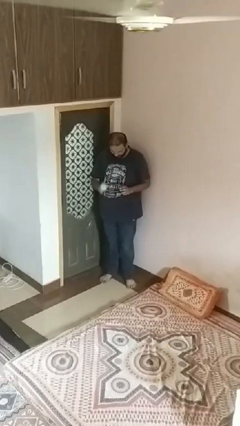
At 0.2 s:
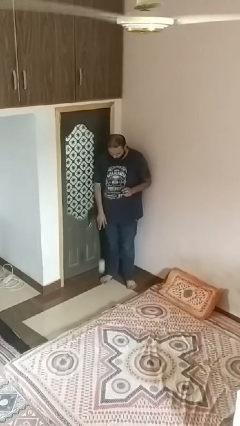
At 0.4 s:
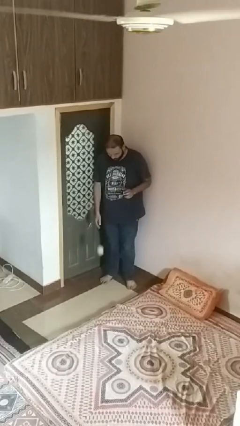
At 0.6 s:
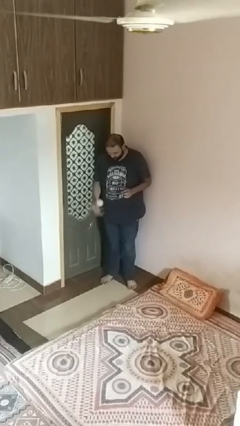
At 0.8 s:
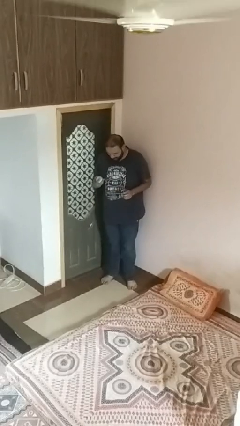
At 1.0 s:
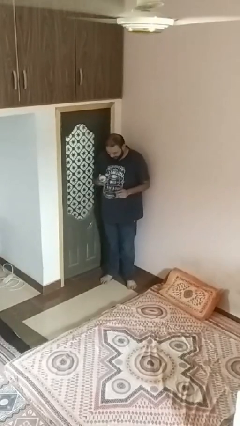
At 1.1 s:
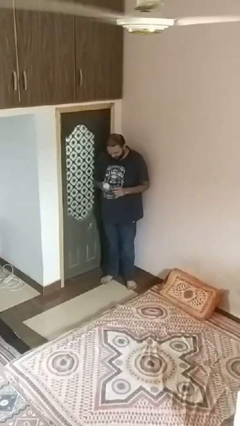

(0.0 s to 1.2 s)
person bounces ball on floor

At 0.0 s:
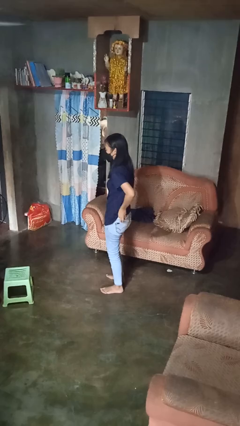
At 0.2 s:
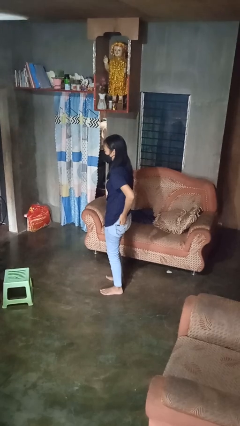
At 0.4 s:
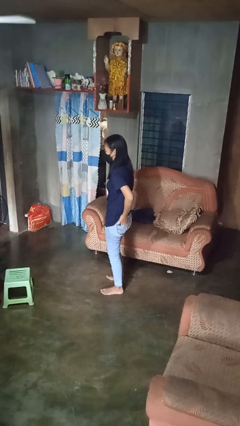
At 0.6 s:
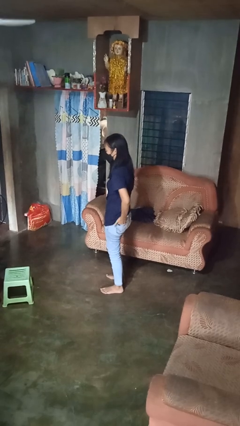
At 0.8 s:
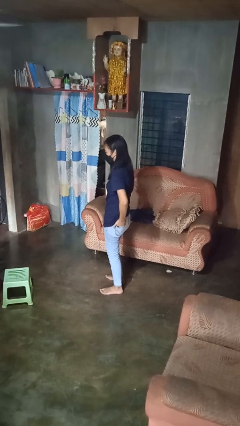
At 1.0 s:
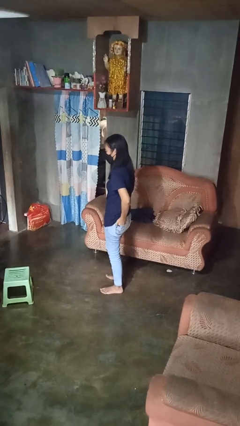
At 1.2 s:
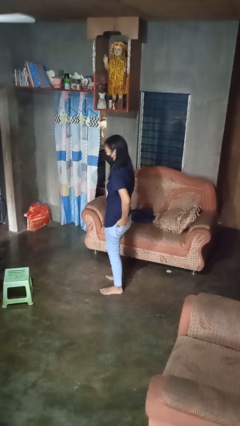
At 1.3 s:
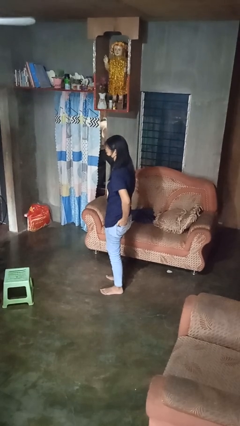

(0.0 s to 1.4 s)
person puts hands in back pockets

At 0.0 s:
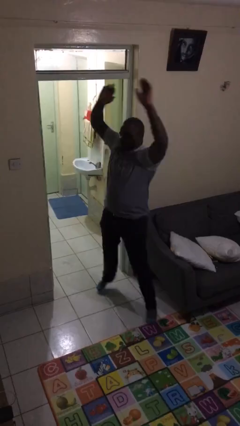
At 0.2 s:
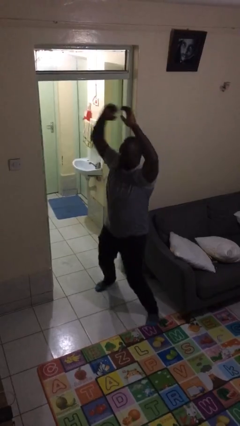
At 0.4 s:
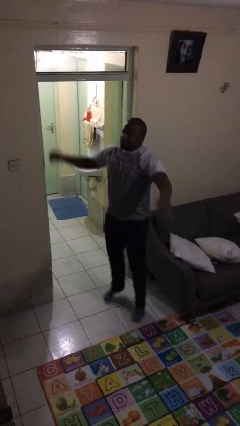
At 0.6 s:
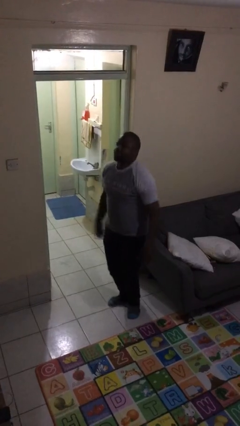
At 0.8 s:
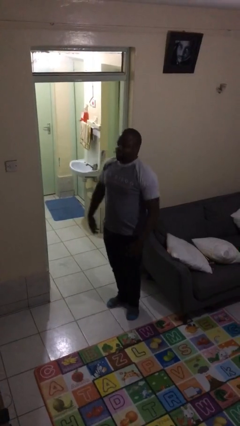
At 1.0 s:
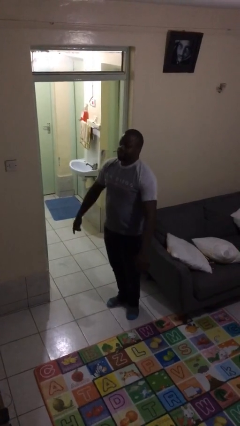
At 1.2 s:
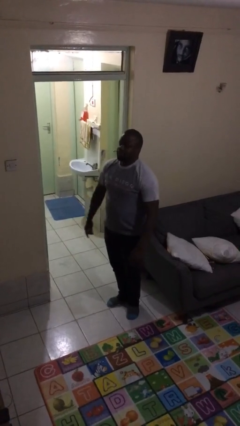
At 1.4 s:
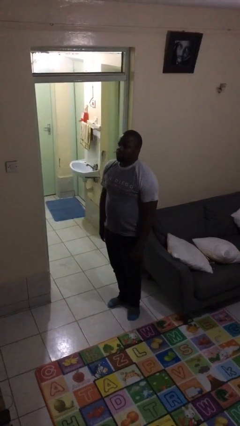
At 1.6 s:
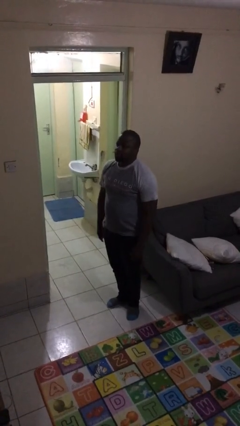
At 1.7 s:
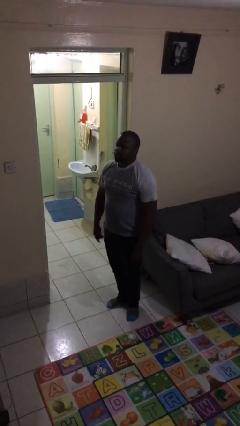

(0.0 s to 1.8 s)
person exercises with jumping jacks

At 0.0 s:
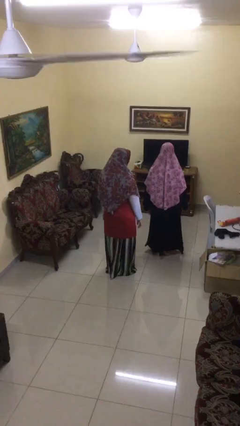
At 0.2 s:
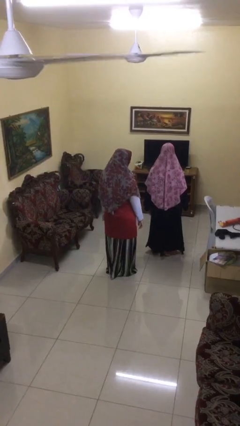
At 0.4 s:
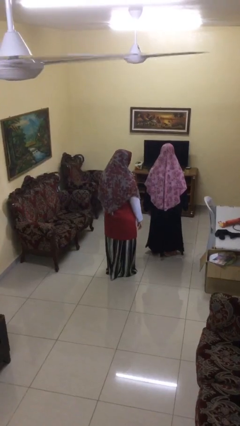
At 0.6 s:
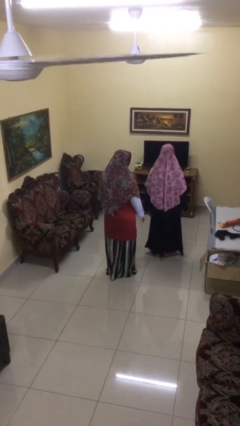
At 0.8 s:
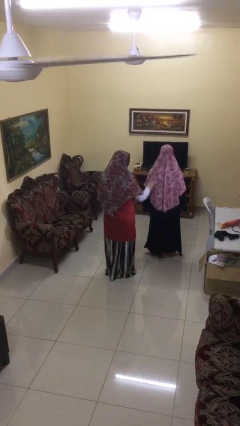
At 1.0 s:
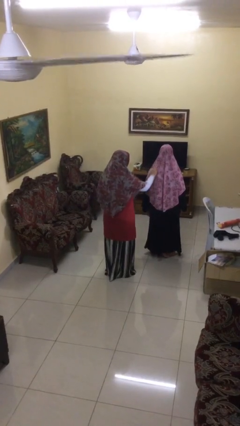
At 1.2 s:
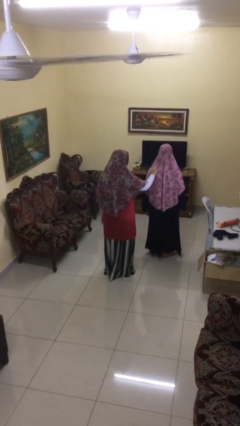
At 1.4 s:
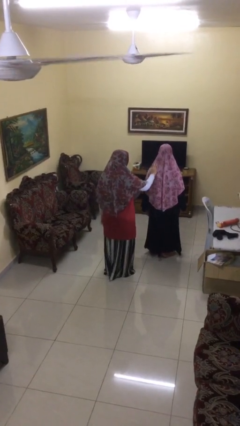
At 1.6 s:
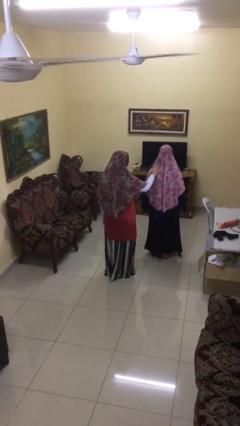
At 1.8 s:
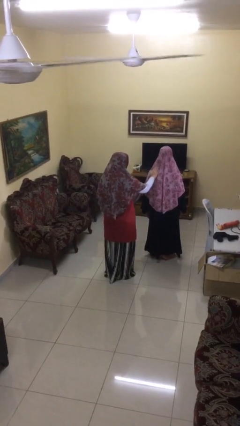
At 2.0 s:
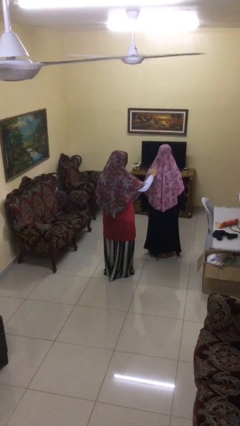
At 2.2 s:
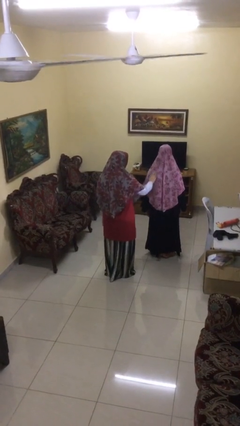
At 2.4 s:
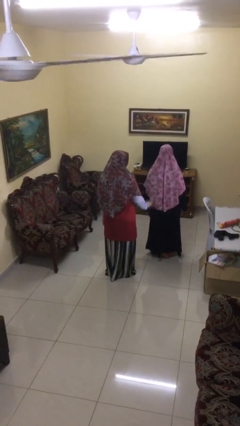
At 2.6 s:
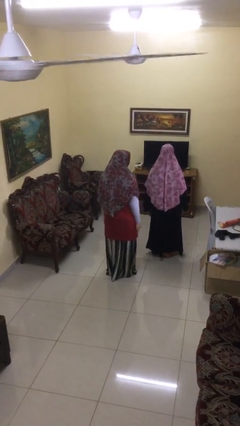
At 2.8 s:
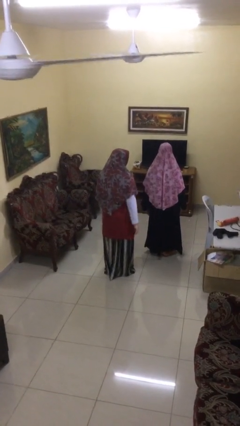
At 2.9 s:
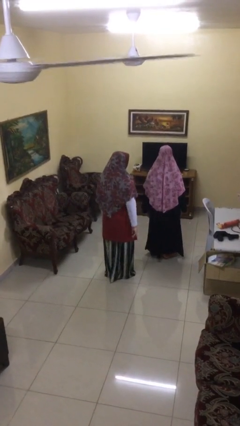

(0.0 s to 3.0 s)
person touches back of person

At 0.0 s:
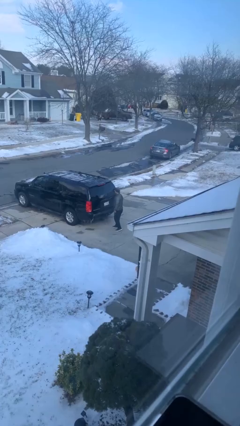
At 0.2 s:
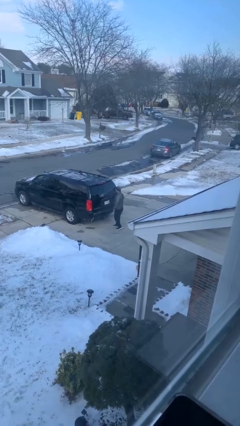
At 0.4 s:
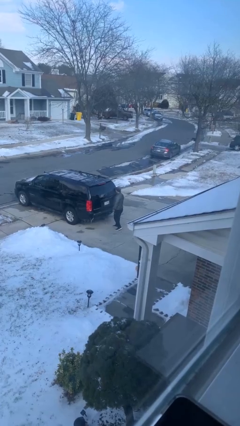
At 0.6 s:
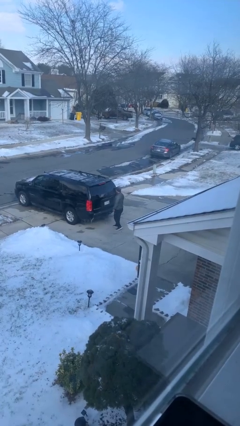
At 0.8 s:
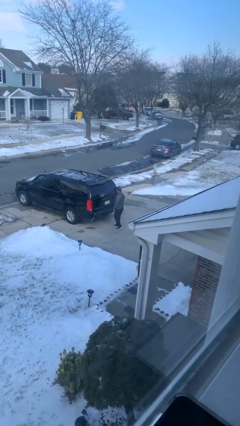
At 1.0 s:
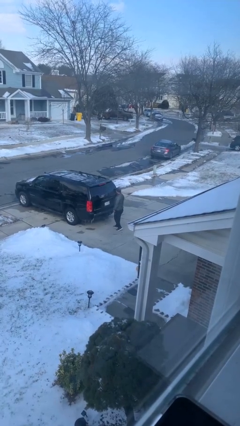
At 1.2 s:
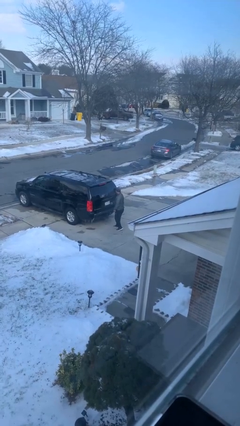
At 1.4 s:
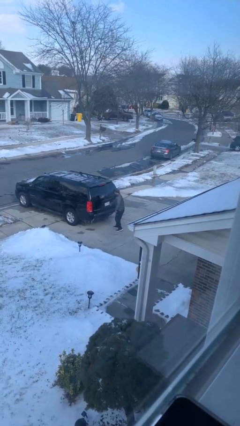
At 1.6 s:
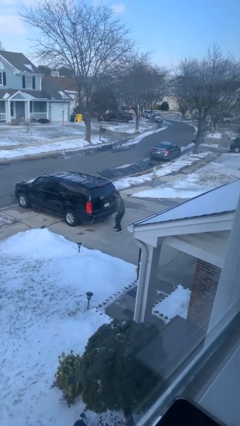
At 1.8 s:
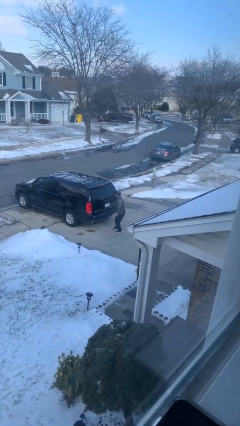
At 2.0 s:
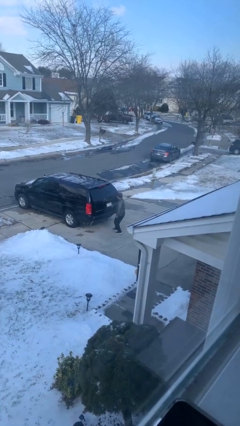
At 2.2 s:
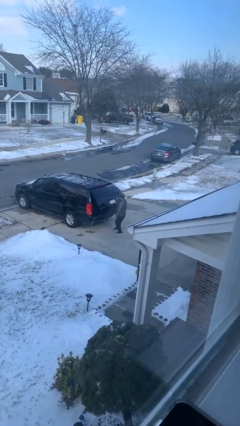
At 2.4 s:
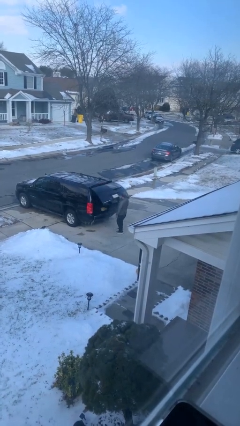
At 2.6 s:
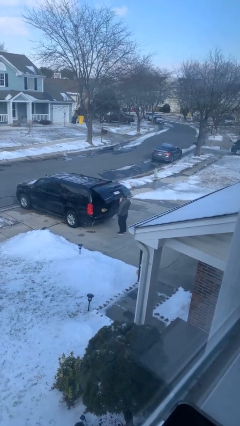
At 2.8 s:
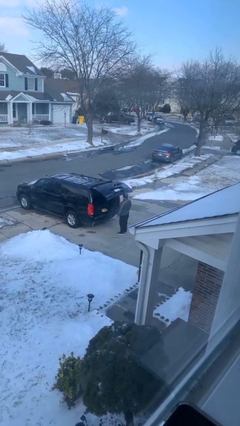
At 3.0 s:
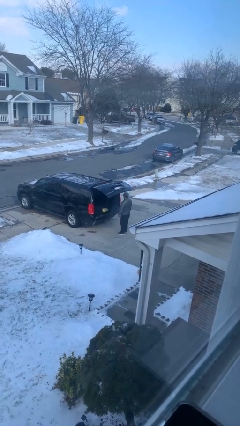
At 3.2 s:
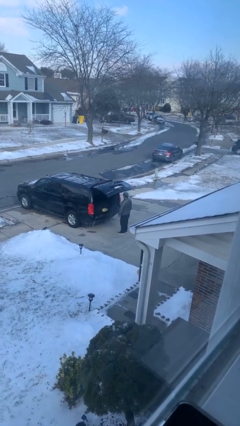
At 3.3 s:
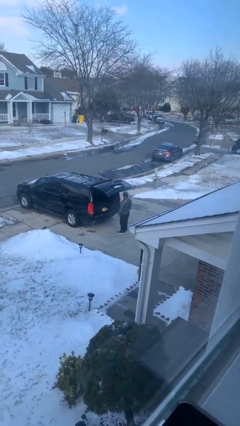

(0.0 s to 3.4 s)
person opens car trunk

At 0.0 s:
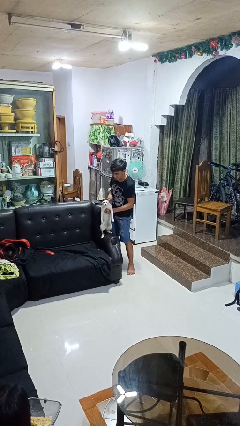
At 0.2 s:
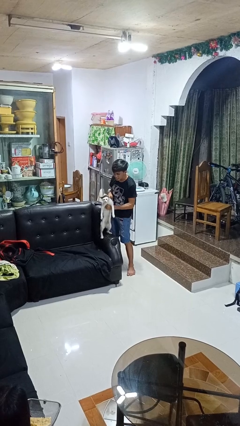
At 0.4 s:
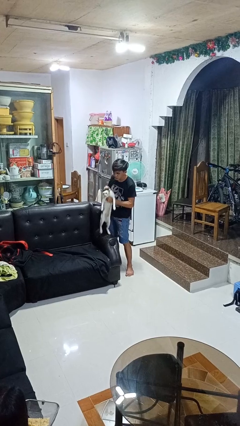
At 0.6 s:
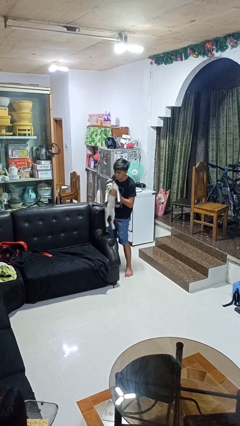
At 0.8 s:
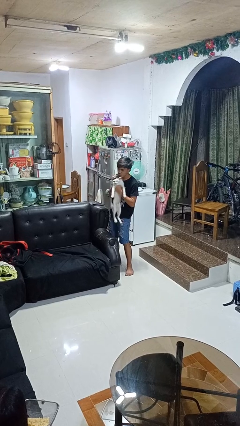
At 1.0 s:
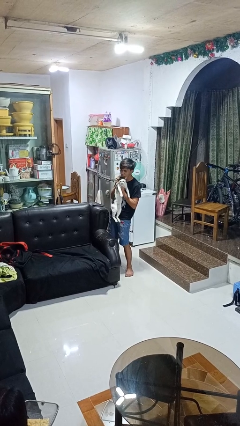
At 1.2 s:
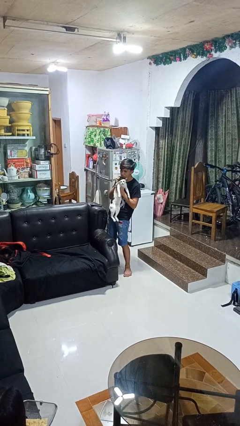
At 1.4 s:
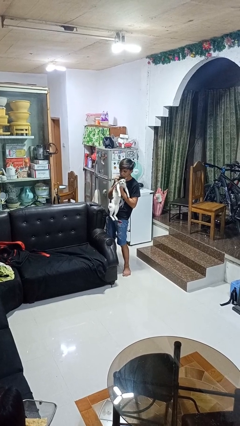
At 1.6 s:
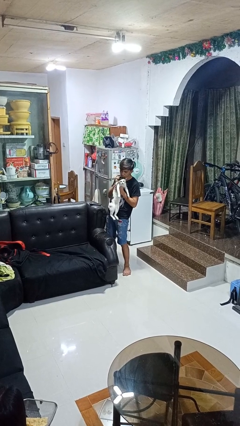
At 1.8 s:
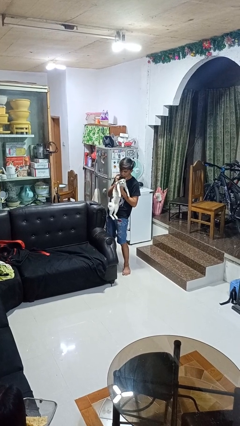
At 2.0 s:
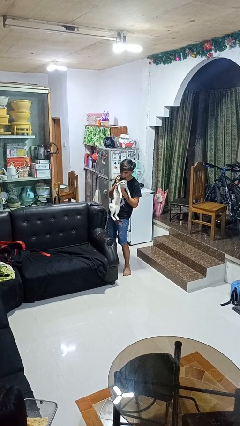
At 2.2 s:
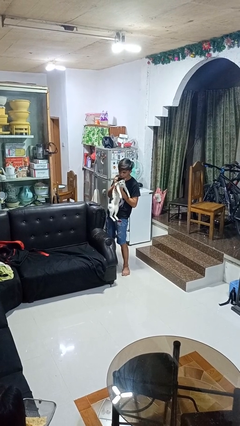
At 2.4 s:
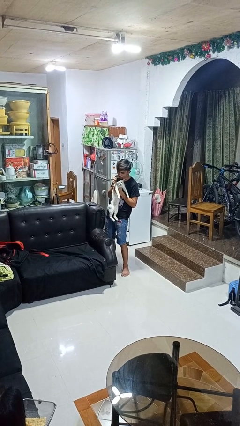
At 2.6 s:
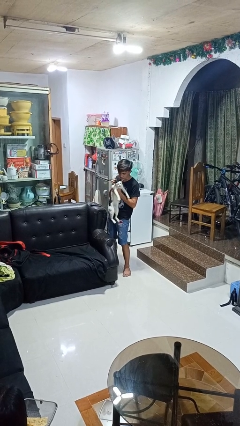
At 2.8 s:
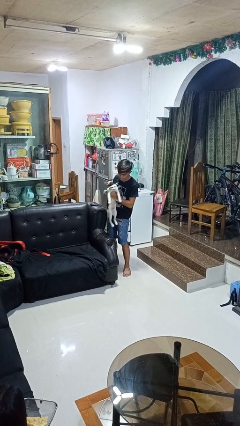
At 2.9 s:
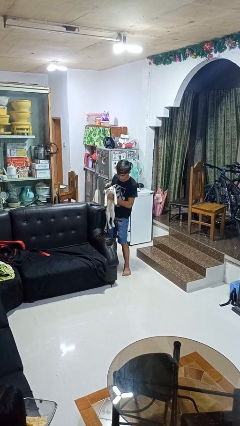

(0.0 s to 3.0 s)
person hugs cat

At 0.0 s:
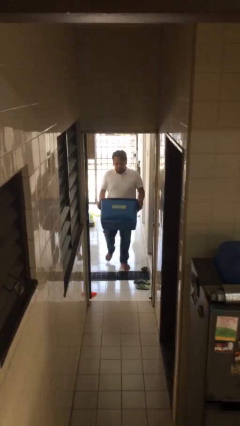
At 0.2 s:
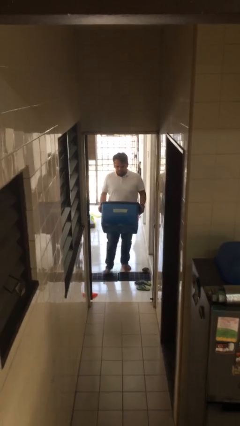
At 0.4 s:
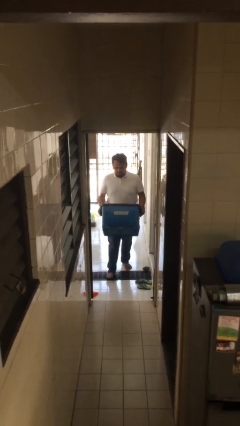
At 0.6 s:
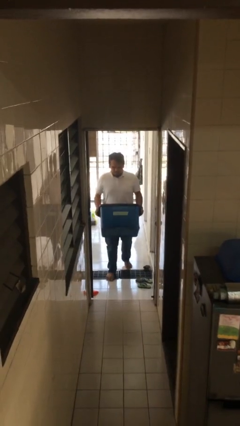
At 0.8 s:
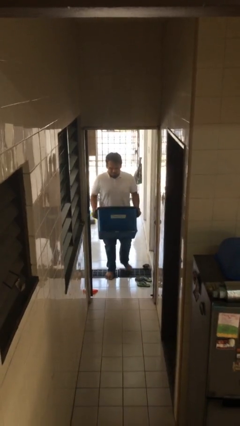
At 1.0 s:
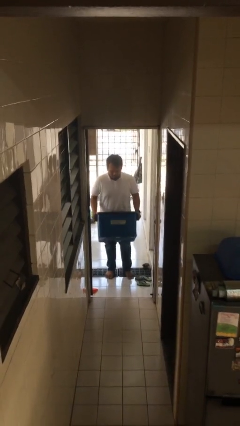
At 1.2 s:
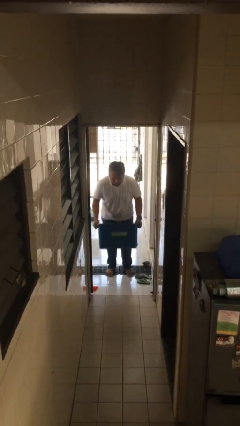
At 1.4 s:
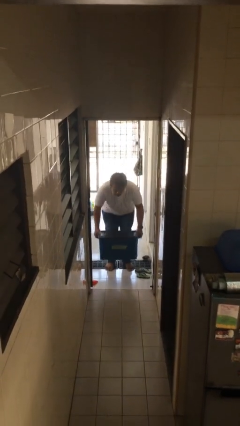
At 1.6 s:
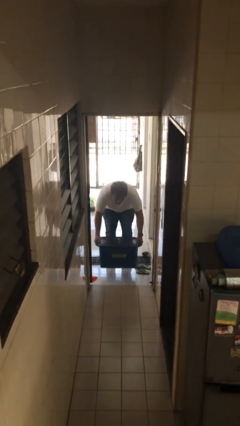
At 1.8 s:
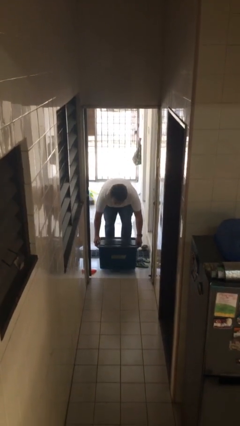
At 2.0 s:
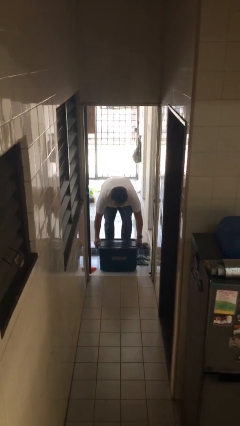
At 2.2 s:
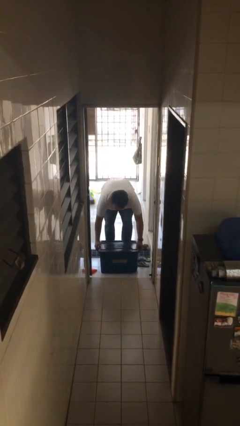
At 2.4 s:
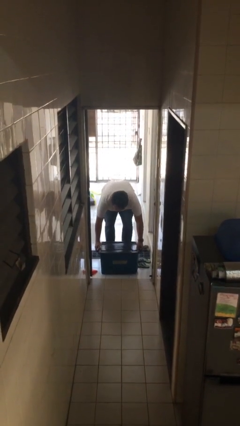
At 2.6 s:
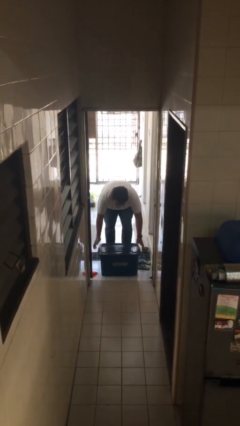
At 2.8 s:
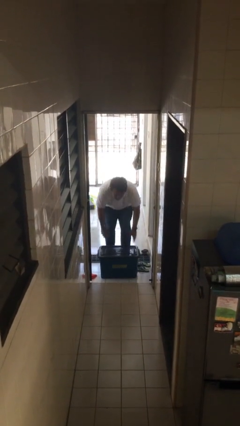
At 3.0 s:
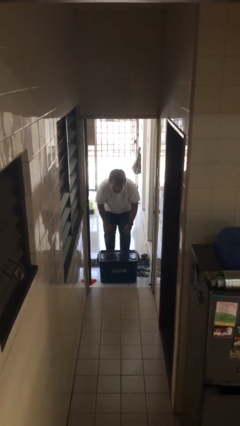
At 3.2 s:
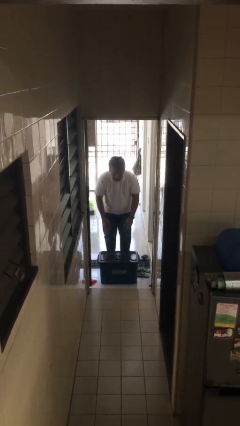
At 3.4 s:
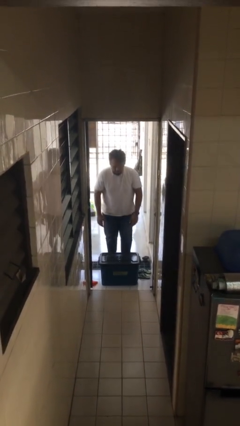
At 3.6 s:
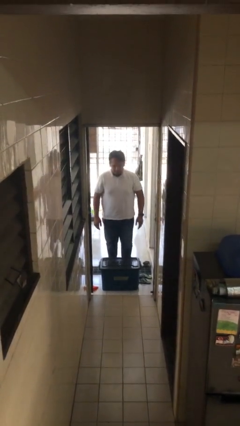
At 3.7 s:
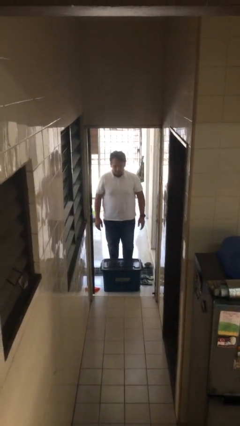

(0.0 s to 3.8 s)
person puts down object on floor
